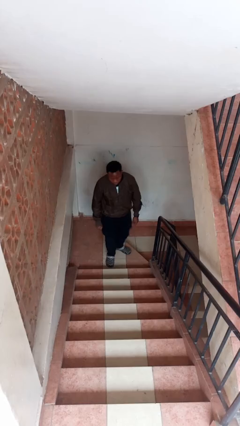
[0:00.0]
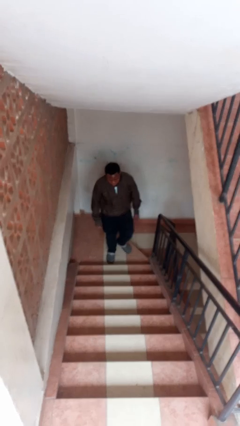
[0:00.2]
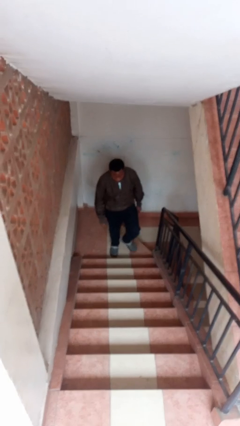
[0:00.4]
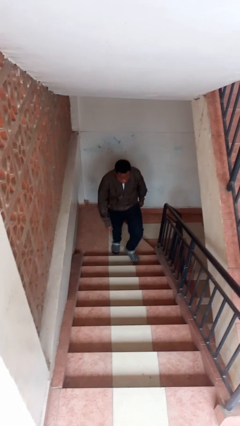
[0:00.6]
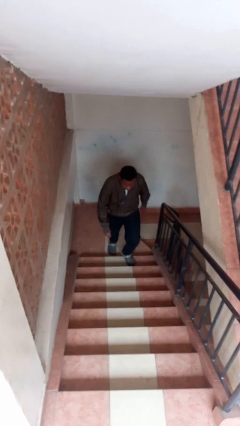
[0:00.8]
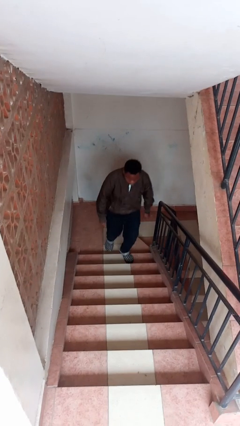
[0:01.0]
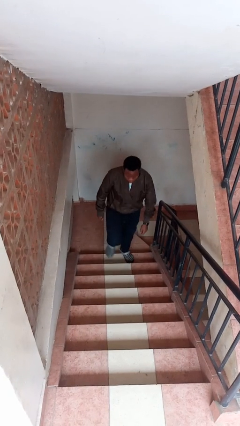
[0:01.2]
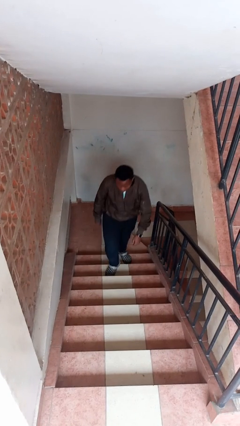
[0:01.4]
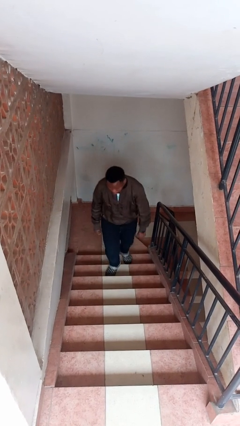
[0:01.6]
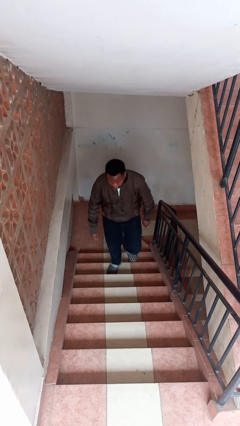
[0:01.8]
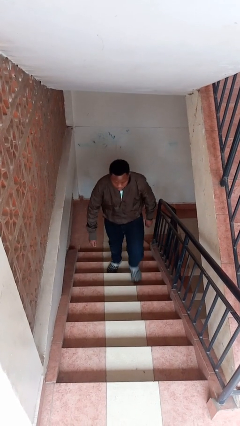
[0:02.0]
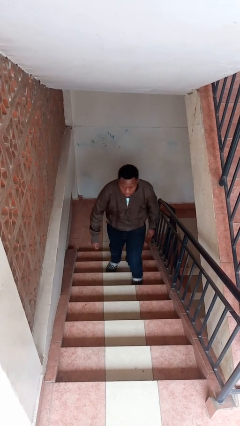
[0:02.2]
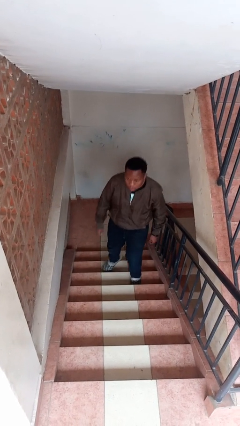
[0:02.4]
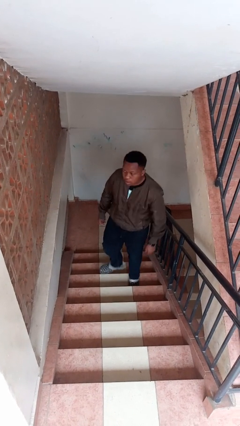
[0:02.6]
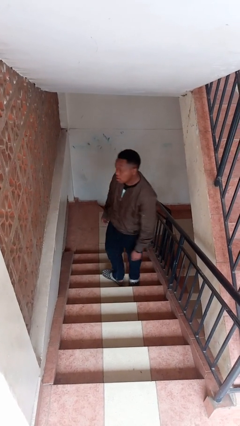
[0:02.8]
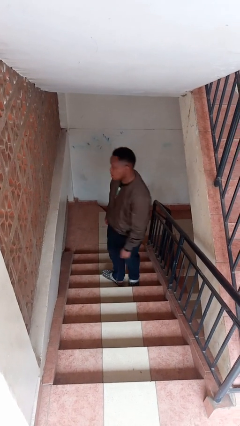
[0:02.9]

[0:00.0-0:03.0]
person climbs up stairs

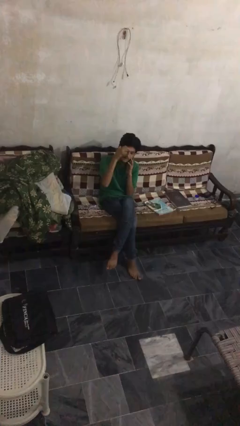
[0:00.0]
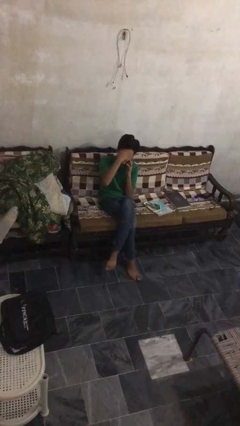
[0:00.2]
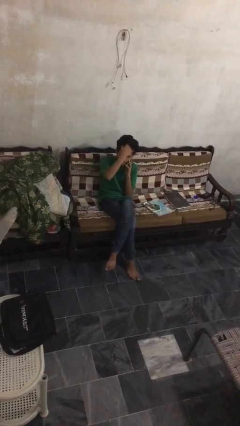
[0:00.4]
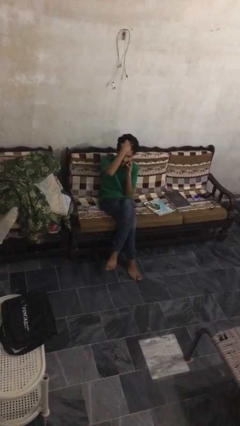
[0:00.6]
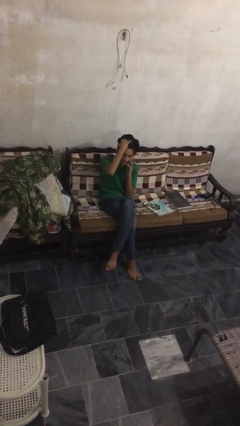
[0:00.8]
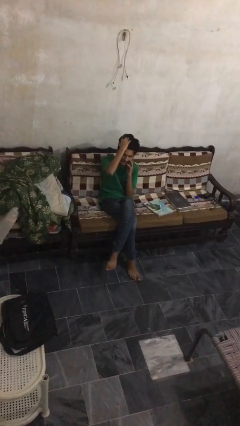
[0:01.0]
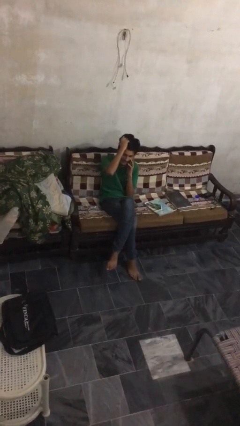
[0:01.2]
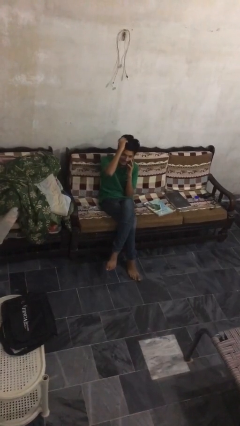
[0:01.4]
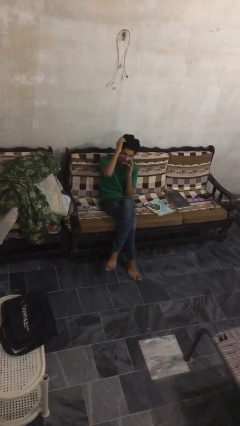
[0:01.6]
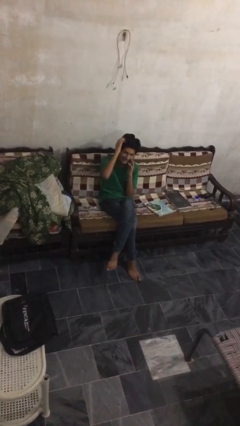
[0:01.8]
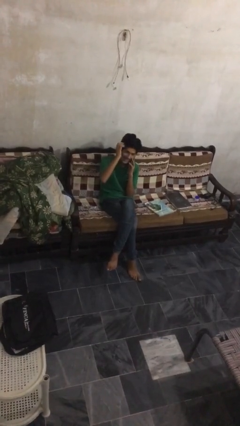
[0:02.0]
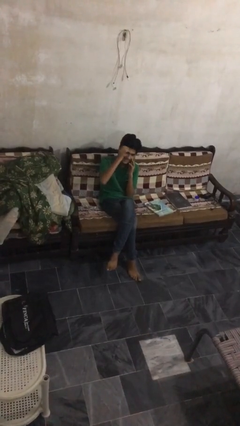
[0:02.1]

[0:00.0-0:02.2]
person talks on phone

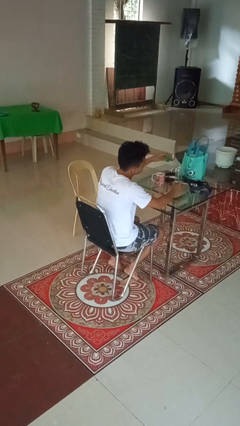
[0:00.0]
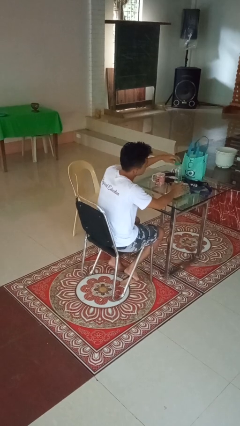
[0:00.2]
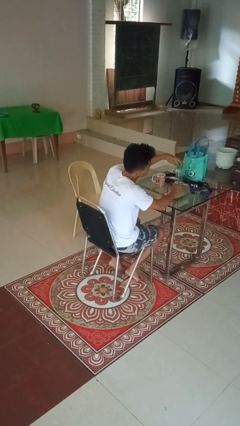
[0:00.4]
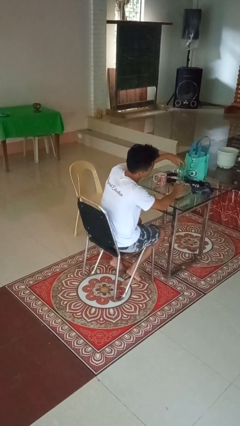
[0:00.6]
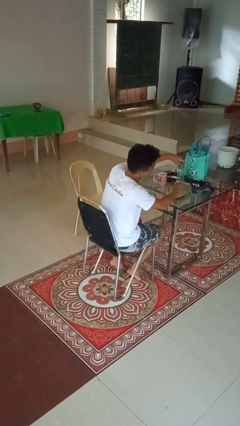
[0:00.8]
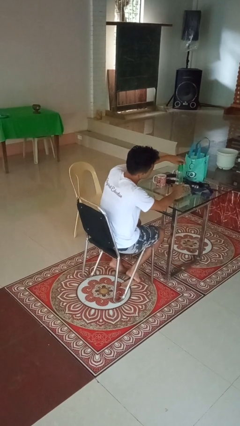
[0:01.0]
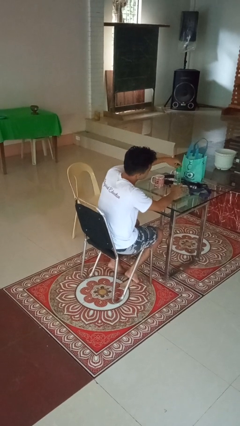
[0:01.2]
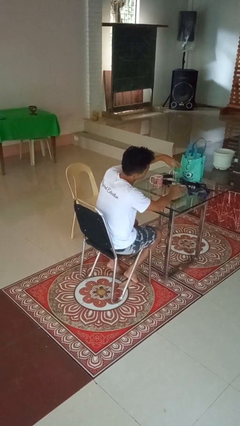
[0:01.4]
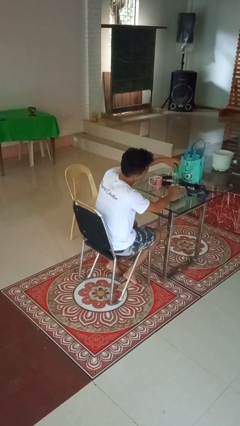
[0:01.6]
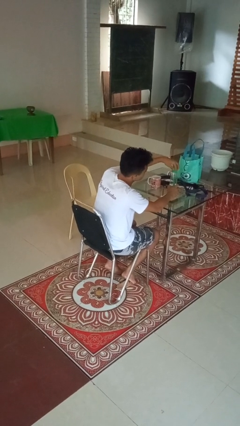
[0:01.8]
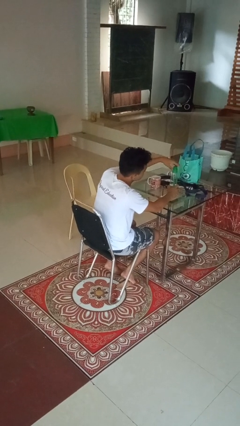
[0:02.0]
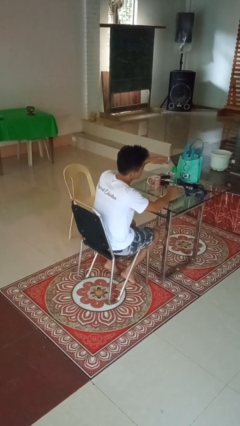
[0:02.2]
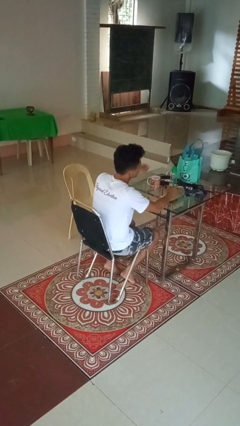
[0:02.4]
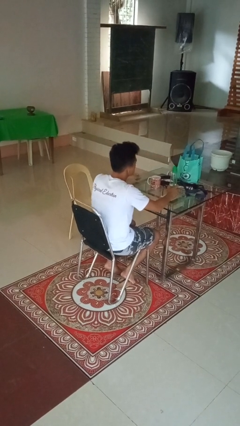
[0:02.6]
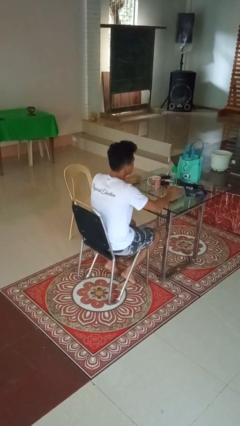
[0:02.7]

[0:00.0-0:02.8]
person screws lid to bottle

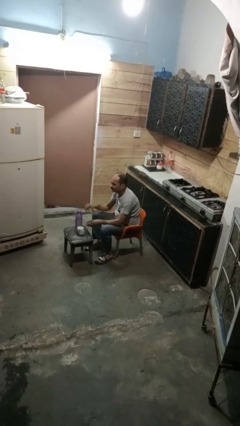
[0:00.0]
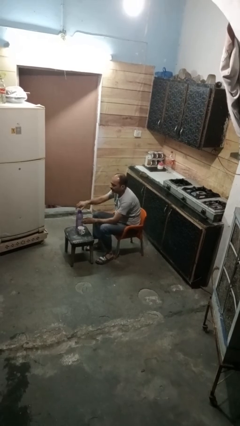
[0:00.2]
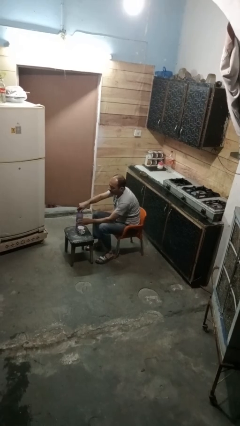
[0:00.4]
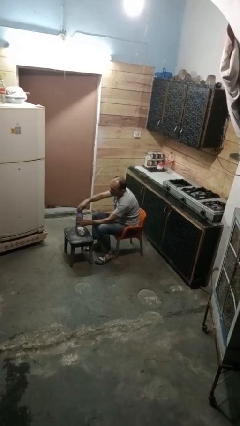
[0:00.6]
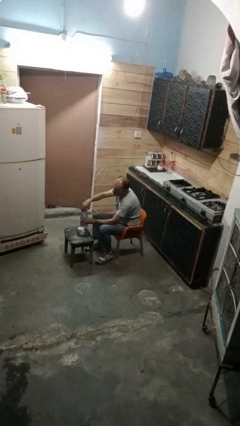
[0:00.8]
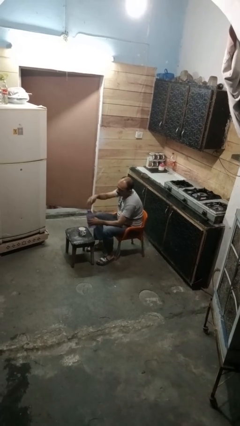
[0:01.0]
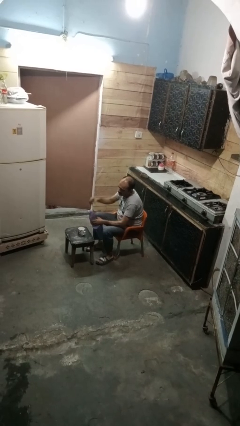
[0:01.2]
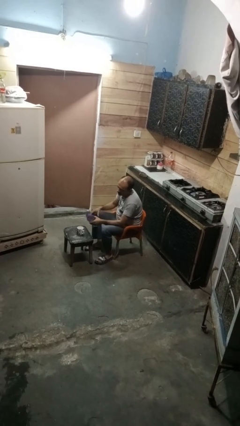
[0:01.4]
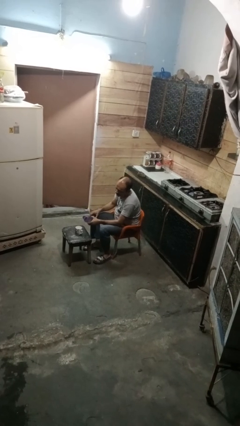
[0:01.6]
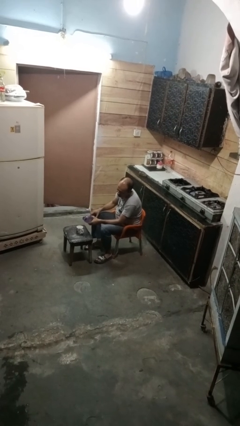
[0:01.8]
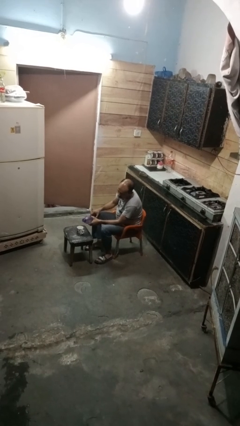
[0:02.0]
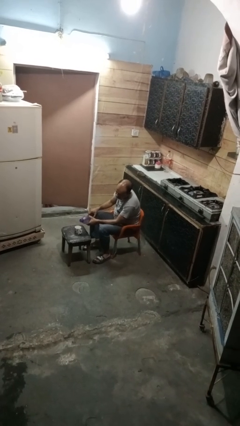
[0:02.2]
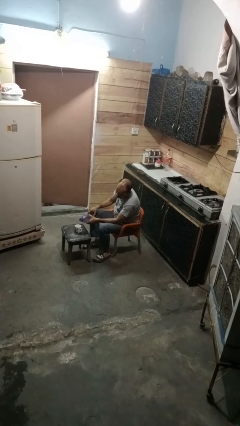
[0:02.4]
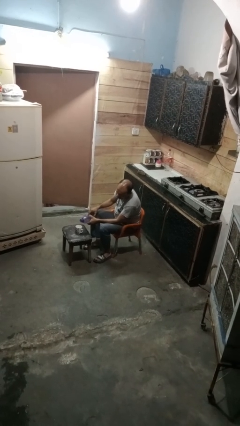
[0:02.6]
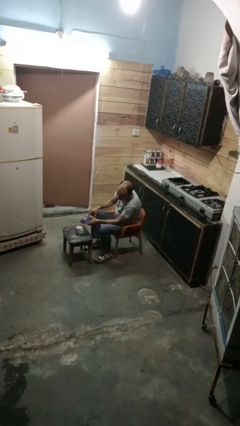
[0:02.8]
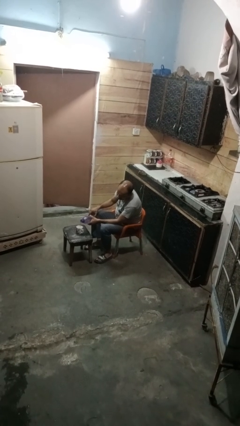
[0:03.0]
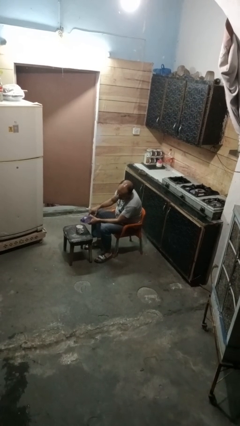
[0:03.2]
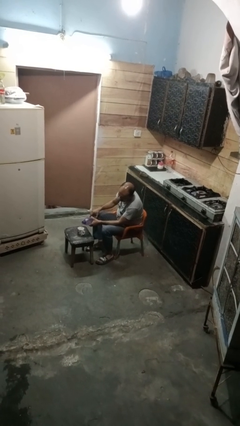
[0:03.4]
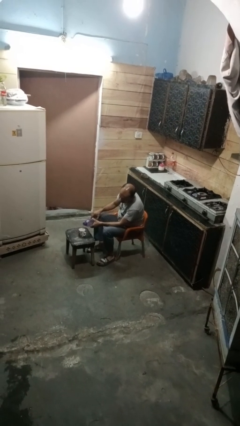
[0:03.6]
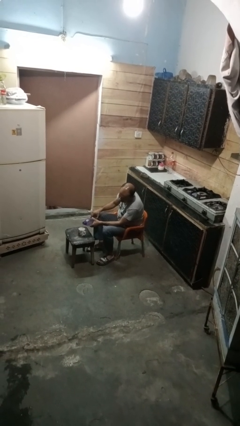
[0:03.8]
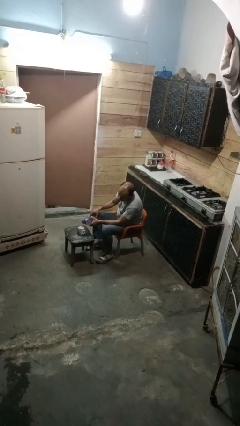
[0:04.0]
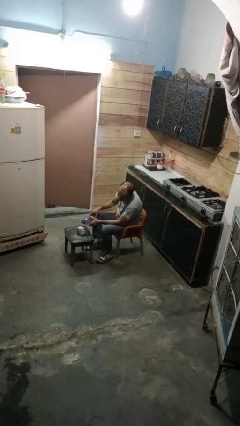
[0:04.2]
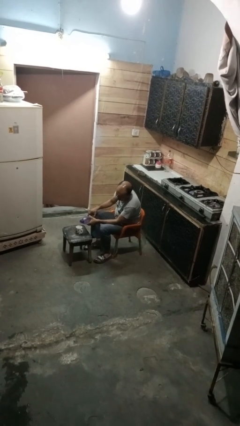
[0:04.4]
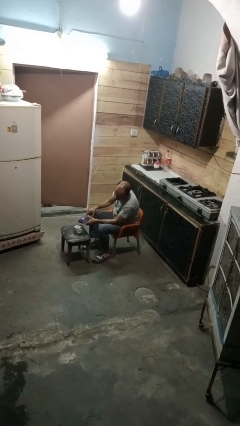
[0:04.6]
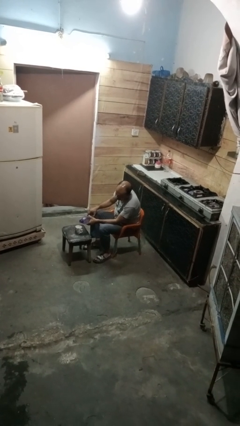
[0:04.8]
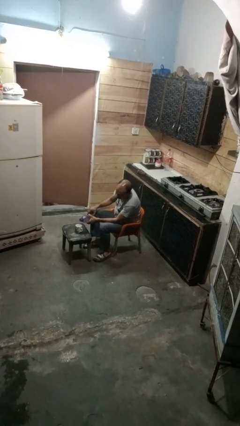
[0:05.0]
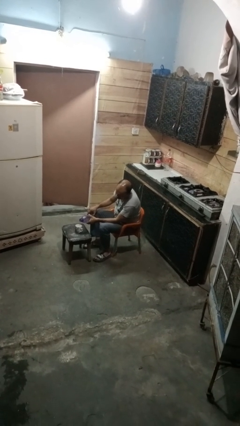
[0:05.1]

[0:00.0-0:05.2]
person pours liquid into cup

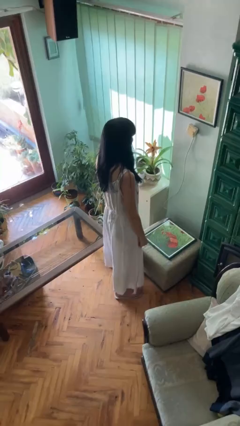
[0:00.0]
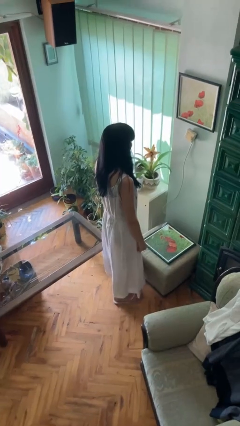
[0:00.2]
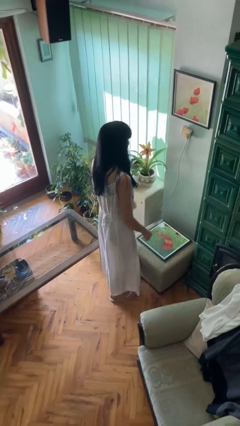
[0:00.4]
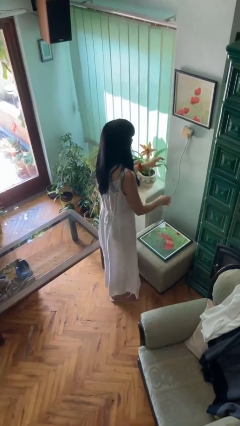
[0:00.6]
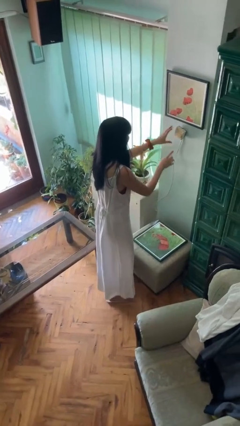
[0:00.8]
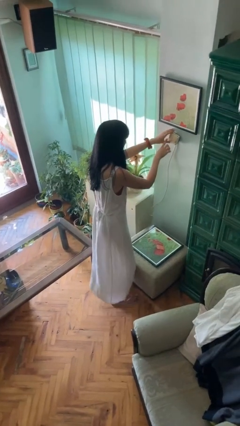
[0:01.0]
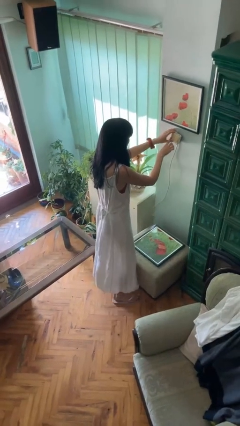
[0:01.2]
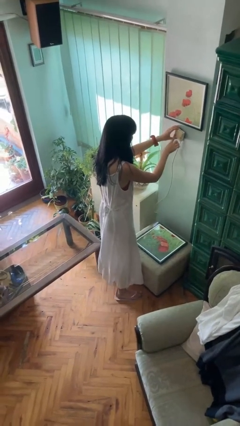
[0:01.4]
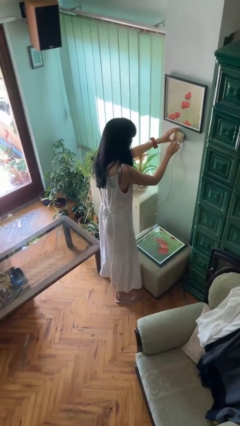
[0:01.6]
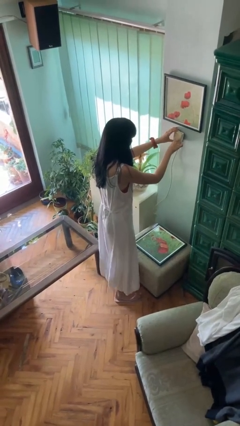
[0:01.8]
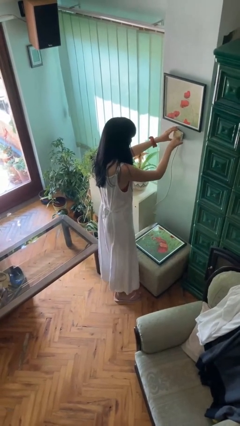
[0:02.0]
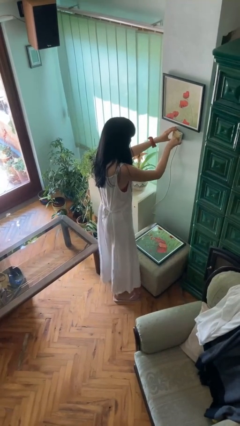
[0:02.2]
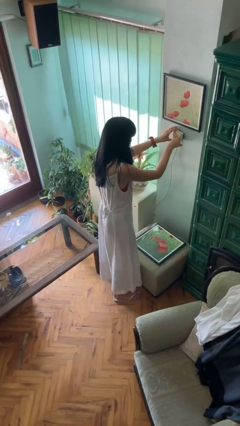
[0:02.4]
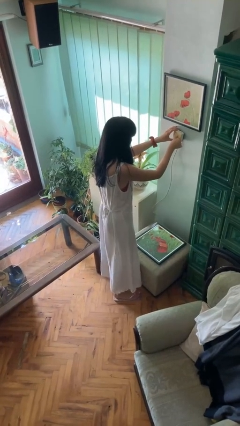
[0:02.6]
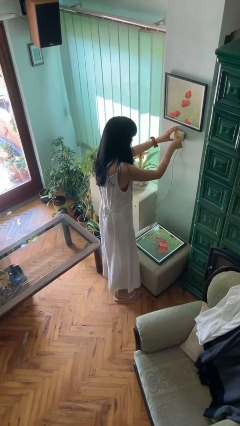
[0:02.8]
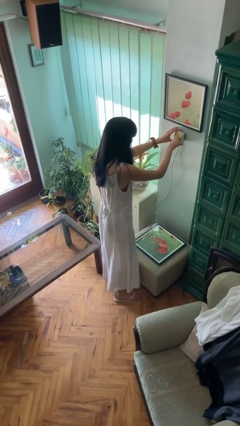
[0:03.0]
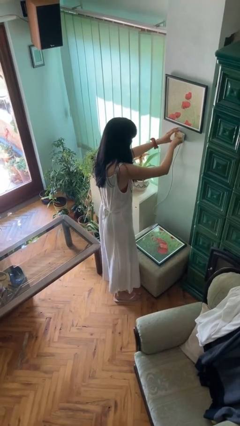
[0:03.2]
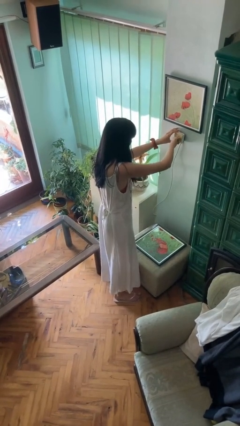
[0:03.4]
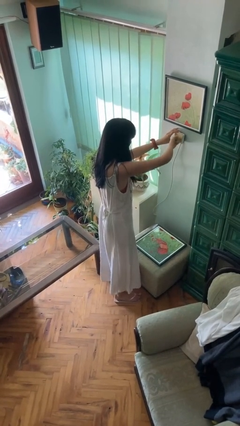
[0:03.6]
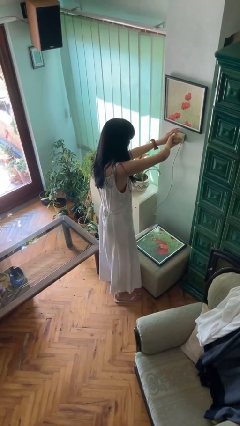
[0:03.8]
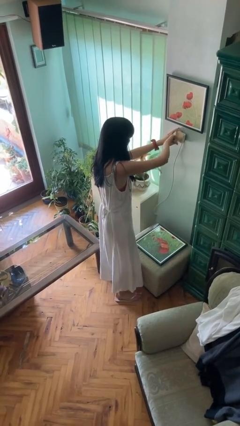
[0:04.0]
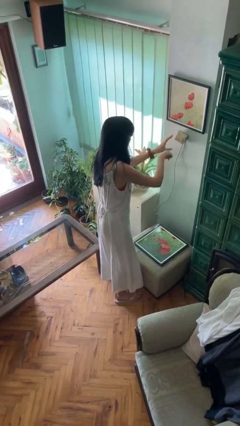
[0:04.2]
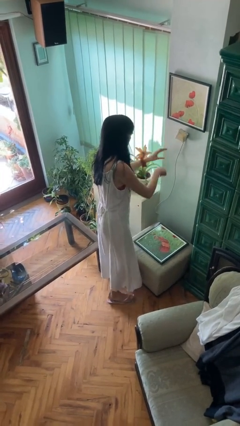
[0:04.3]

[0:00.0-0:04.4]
person adjusts thermostat
